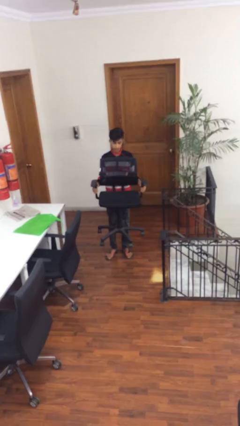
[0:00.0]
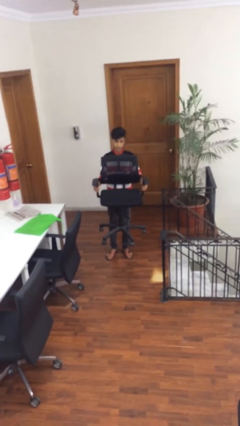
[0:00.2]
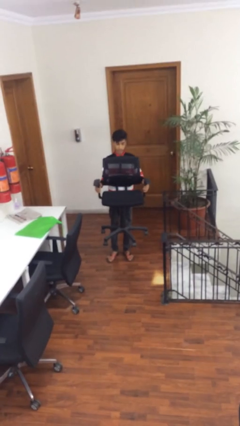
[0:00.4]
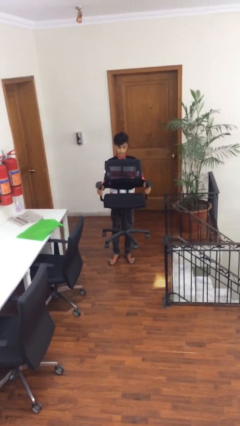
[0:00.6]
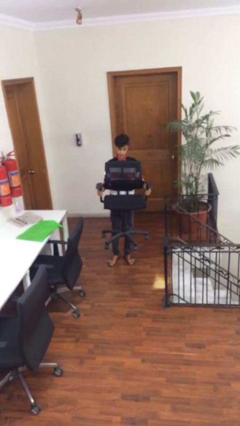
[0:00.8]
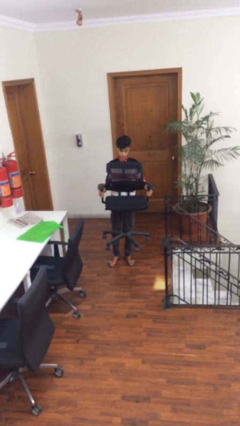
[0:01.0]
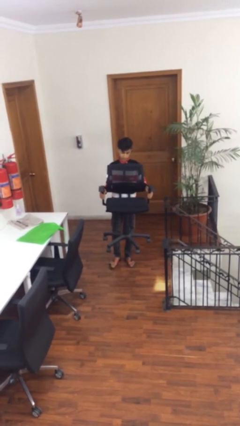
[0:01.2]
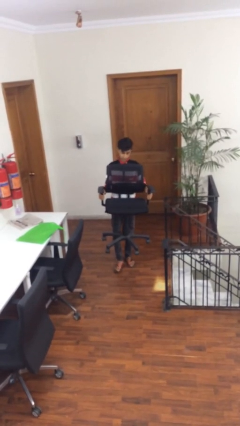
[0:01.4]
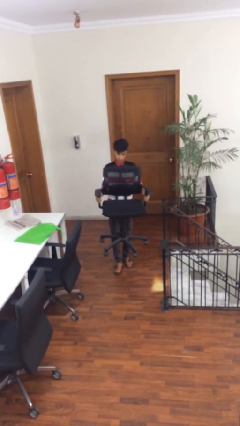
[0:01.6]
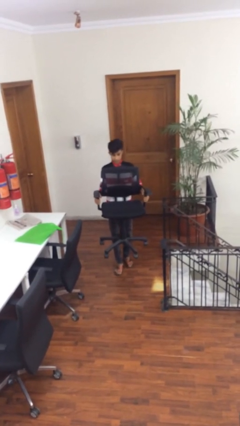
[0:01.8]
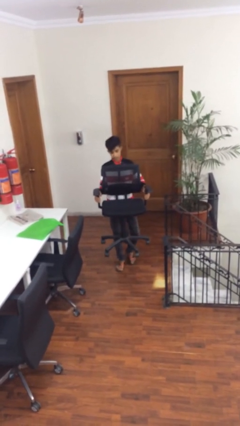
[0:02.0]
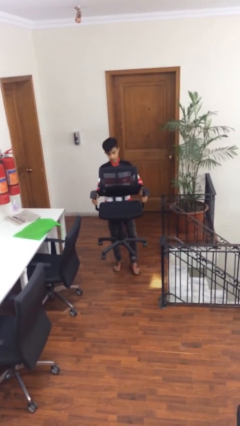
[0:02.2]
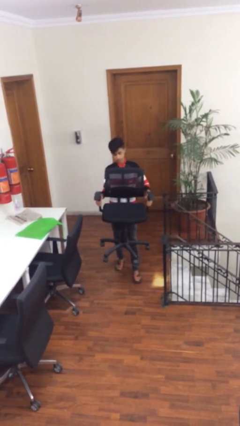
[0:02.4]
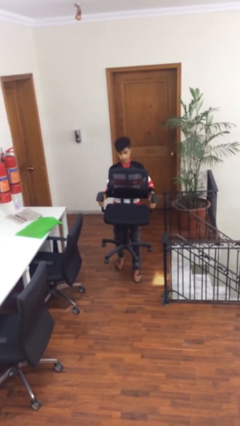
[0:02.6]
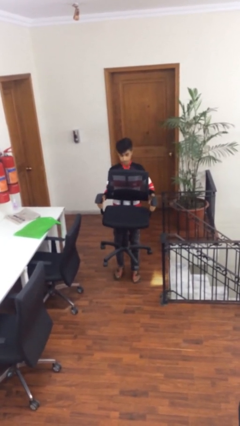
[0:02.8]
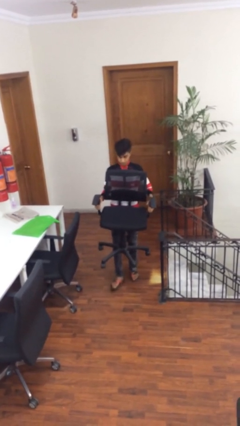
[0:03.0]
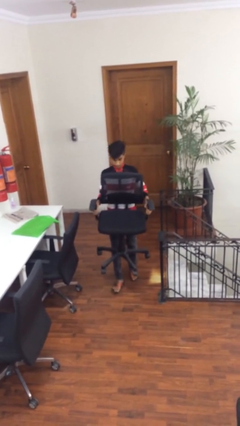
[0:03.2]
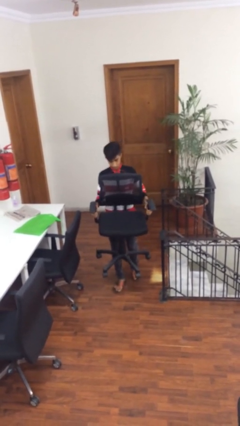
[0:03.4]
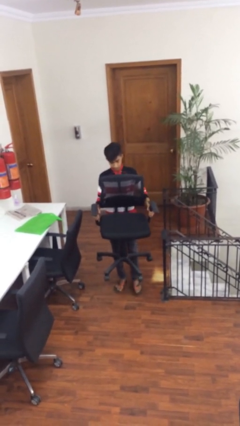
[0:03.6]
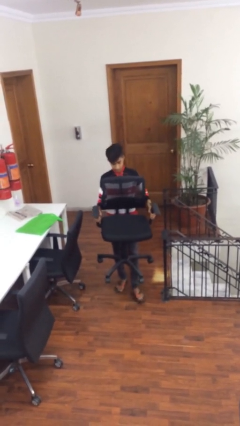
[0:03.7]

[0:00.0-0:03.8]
person carries heavy object

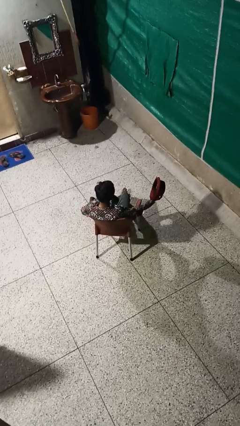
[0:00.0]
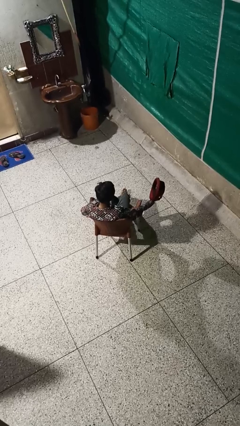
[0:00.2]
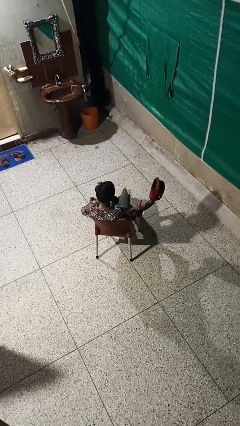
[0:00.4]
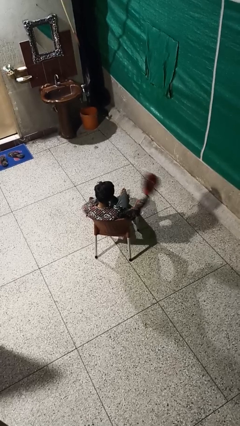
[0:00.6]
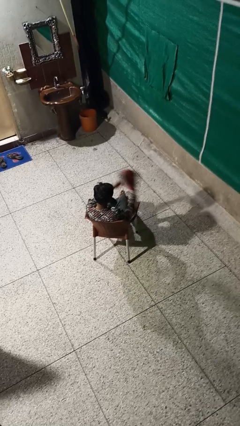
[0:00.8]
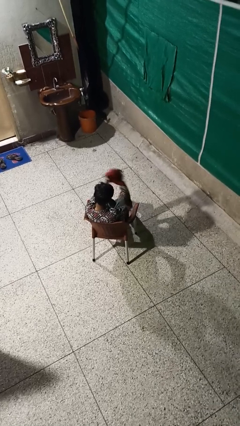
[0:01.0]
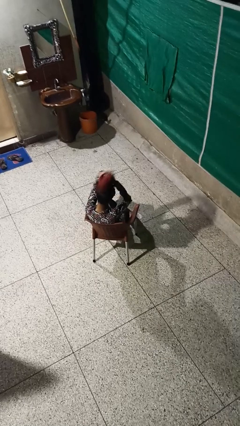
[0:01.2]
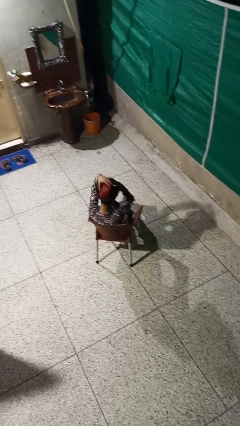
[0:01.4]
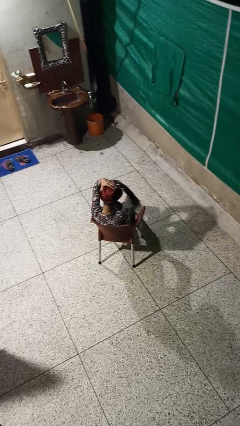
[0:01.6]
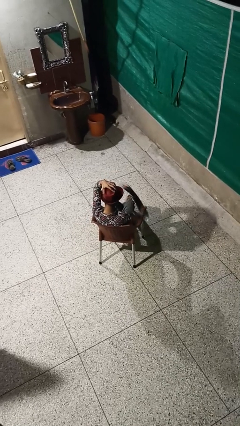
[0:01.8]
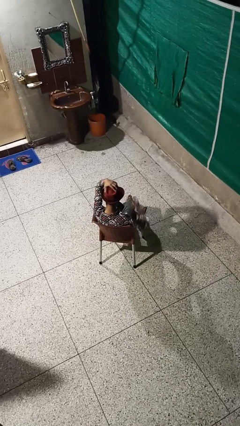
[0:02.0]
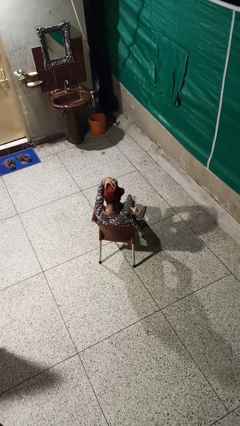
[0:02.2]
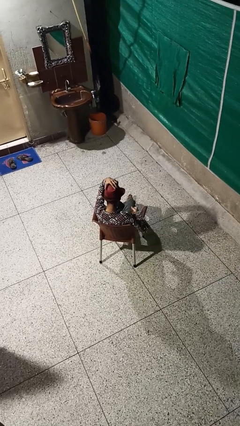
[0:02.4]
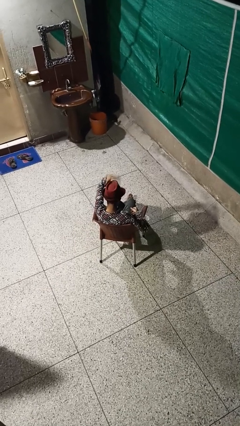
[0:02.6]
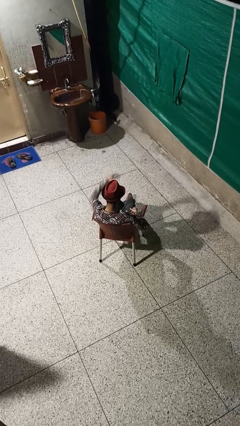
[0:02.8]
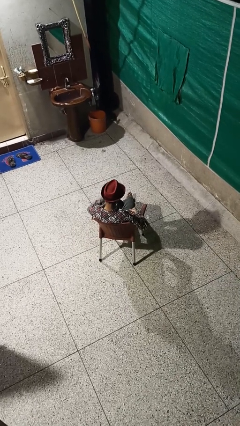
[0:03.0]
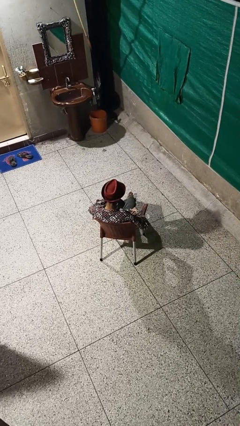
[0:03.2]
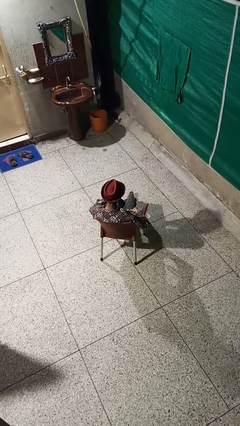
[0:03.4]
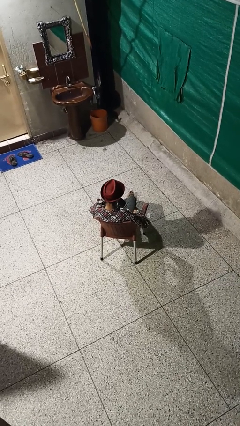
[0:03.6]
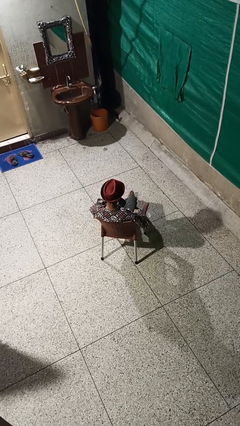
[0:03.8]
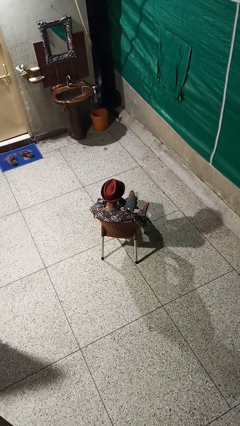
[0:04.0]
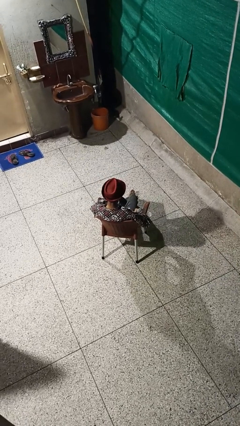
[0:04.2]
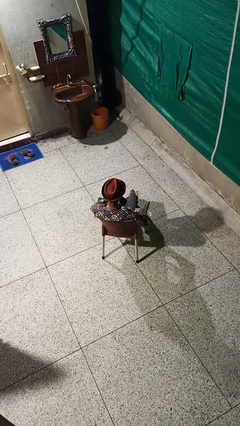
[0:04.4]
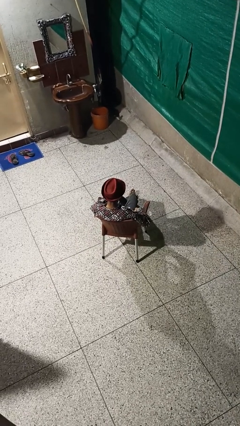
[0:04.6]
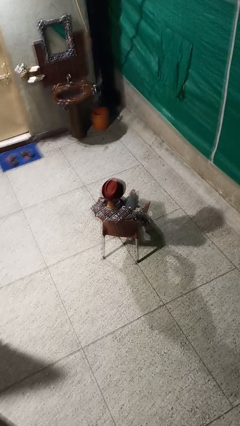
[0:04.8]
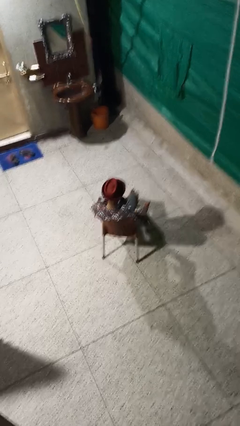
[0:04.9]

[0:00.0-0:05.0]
person puts on hat

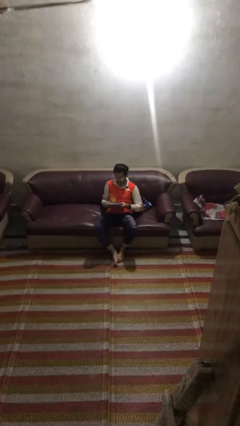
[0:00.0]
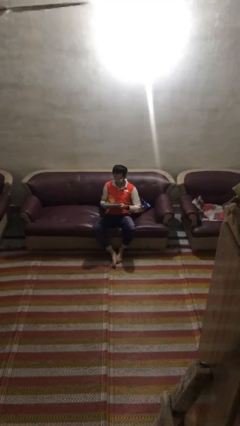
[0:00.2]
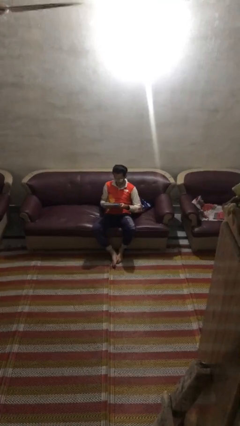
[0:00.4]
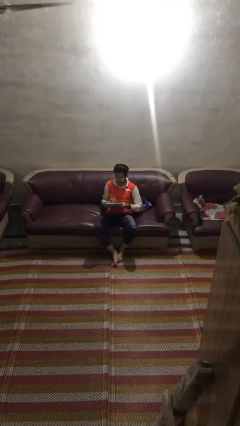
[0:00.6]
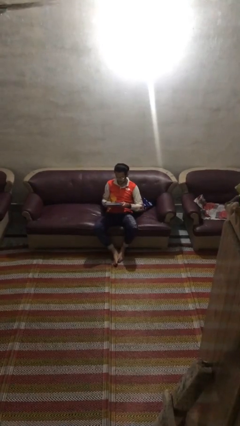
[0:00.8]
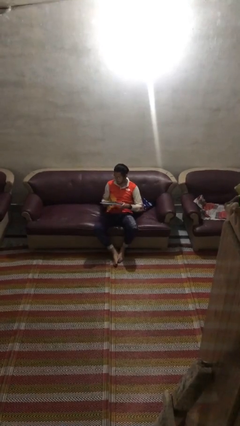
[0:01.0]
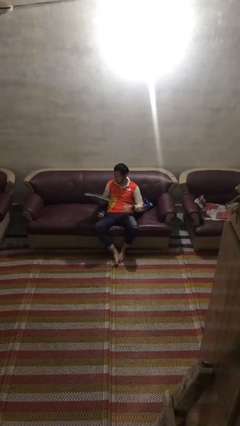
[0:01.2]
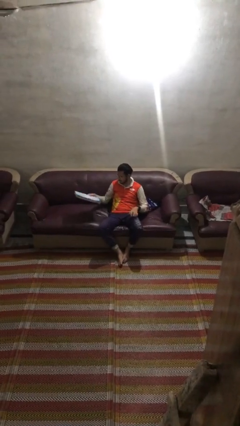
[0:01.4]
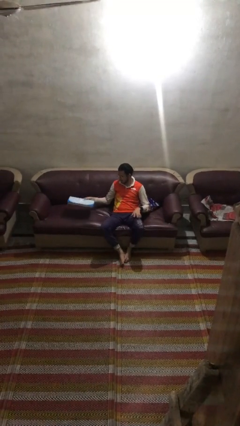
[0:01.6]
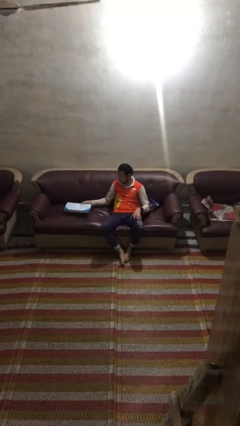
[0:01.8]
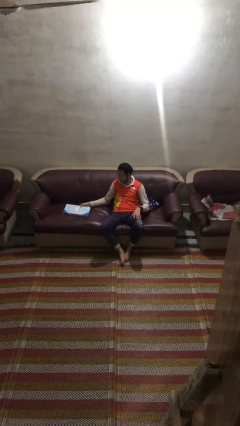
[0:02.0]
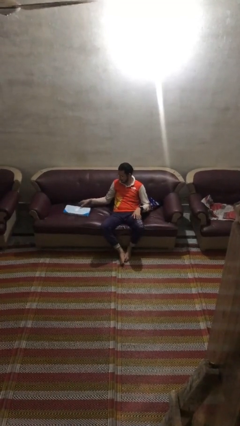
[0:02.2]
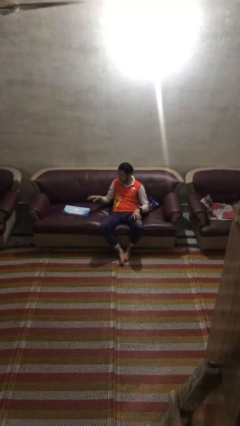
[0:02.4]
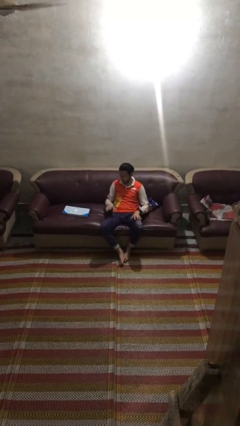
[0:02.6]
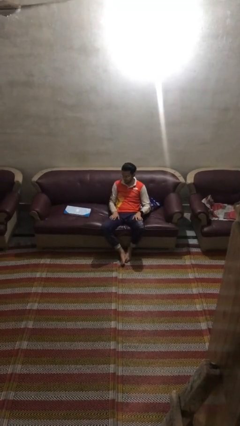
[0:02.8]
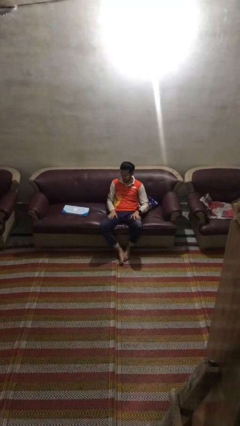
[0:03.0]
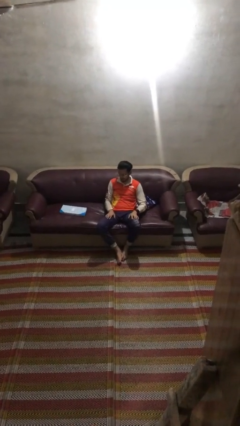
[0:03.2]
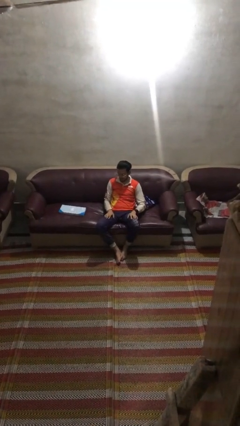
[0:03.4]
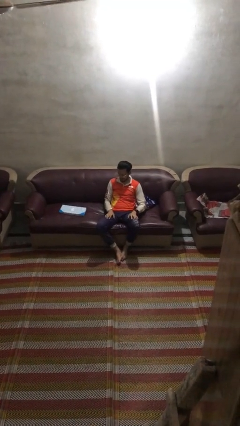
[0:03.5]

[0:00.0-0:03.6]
person puts down object on couch

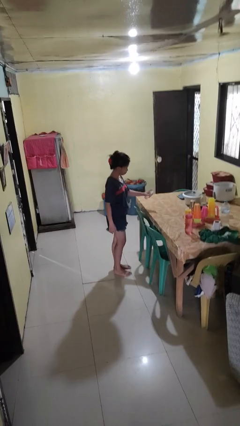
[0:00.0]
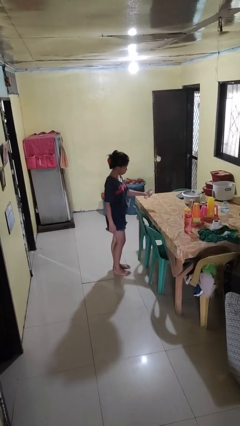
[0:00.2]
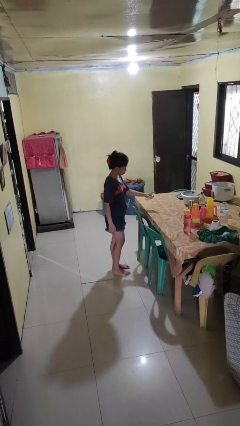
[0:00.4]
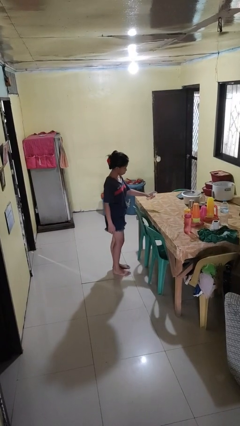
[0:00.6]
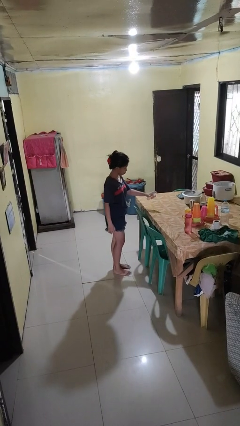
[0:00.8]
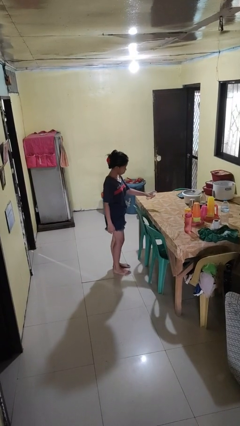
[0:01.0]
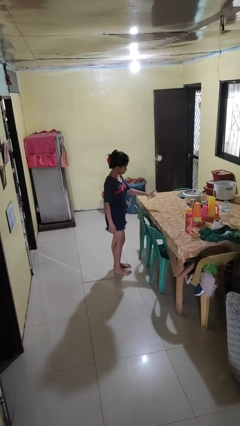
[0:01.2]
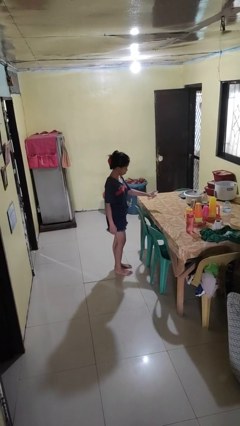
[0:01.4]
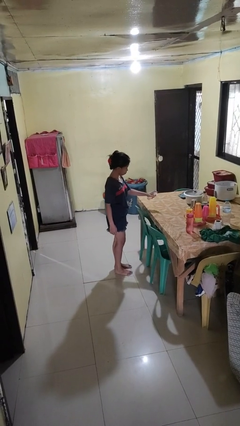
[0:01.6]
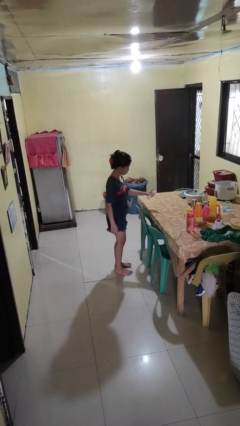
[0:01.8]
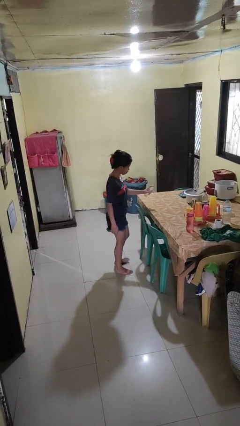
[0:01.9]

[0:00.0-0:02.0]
person sprays from bottle

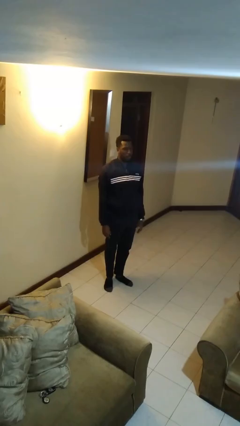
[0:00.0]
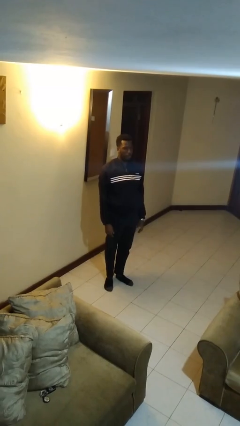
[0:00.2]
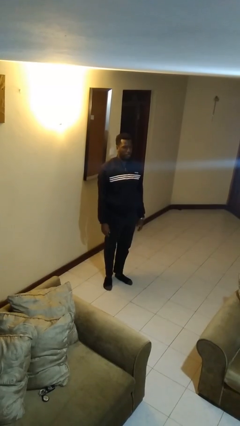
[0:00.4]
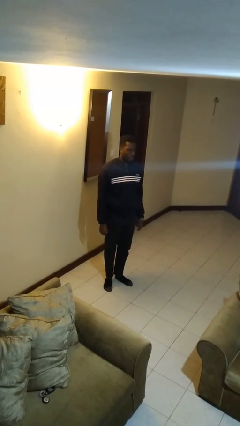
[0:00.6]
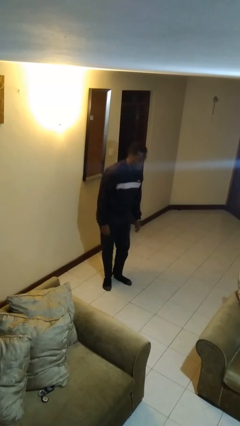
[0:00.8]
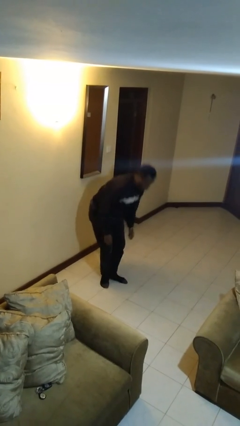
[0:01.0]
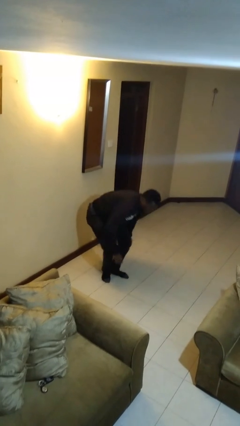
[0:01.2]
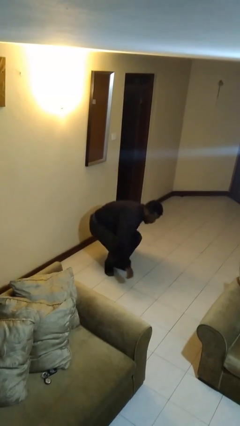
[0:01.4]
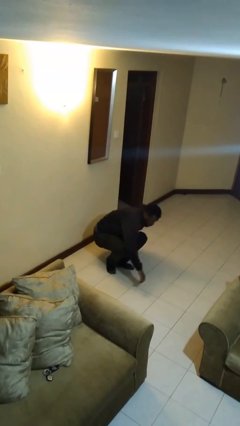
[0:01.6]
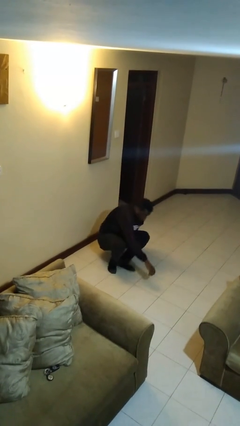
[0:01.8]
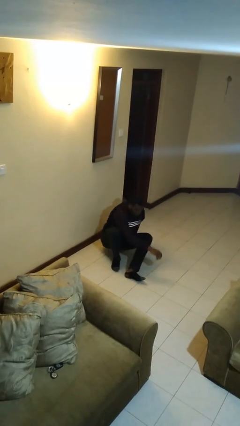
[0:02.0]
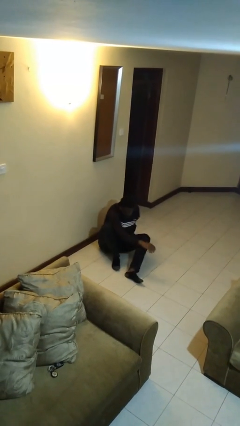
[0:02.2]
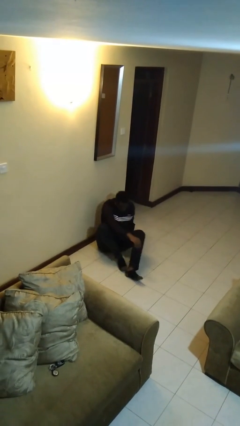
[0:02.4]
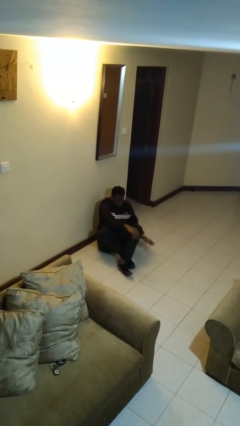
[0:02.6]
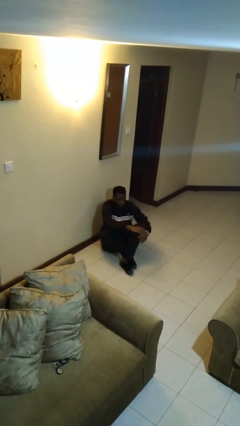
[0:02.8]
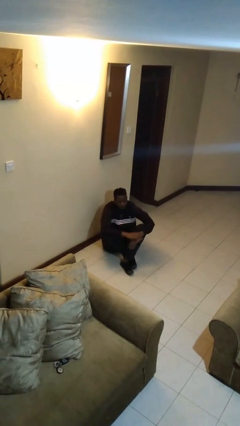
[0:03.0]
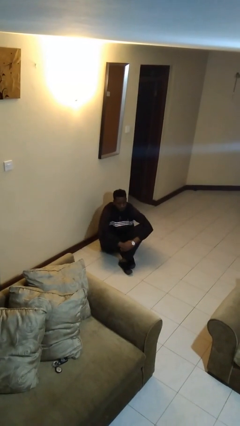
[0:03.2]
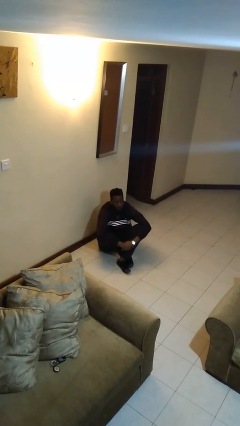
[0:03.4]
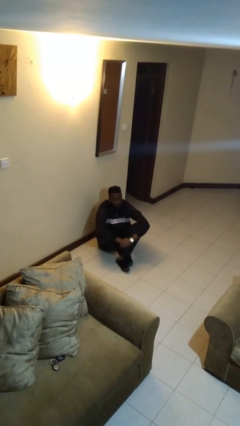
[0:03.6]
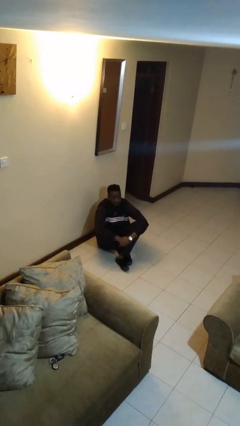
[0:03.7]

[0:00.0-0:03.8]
person sits crisscross
